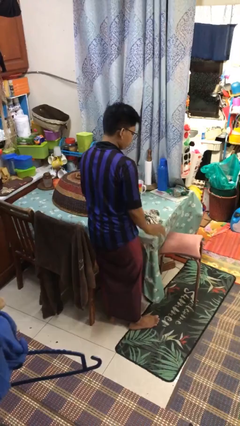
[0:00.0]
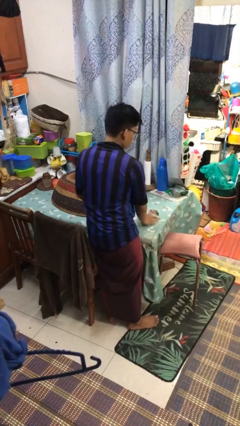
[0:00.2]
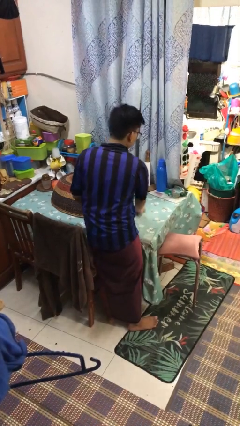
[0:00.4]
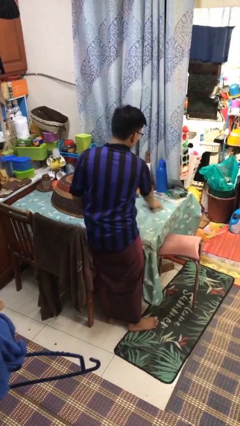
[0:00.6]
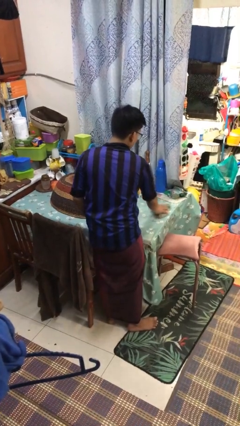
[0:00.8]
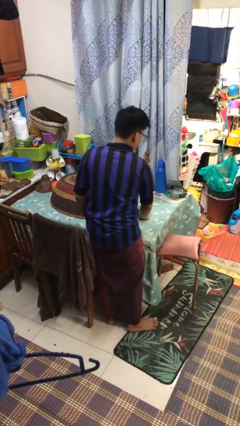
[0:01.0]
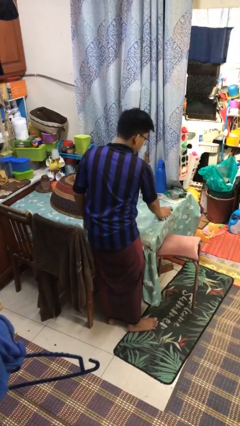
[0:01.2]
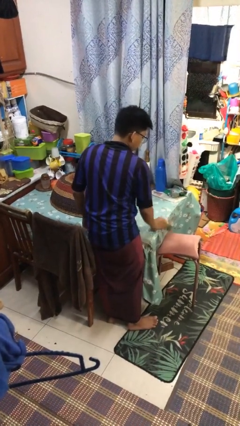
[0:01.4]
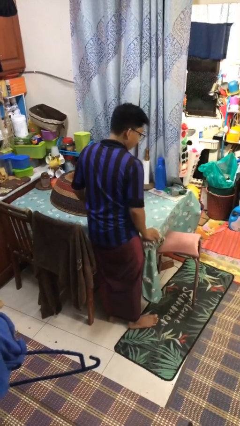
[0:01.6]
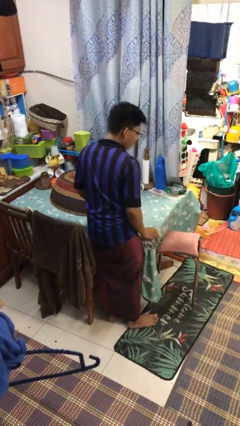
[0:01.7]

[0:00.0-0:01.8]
person cleans table with rag

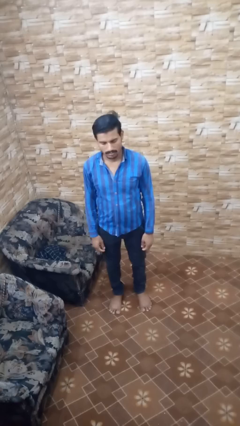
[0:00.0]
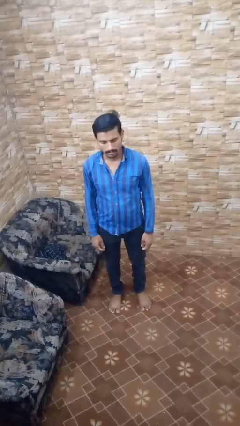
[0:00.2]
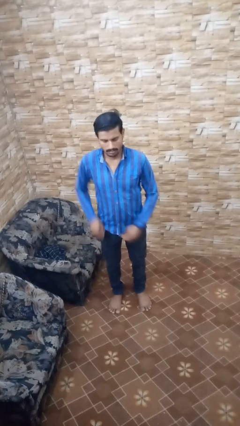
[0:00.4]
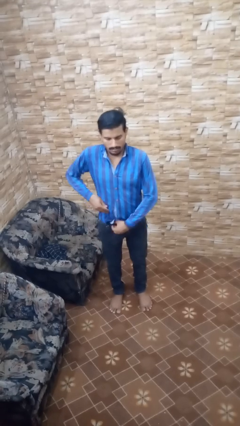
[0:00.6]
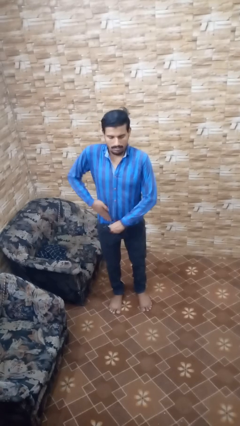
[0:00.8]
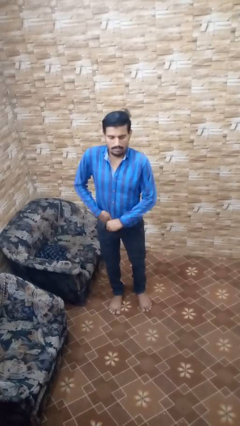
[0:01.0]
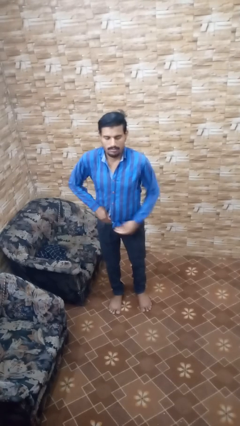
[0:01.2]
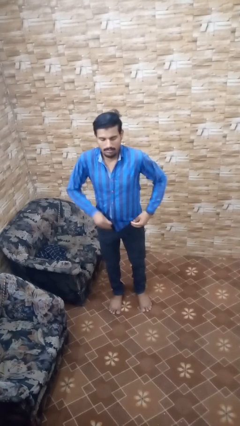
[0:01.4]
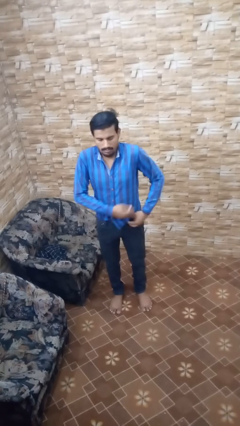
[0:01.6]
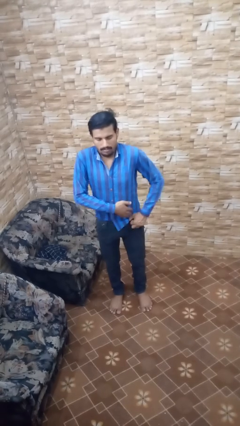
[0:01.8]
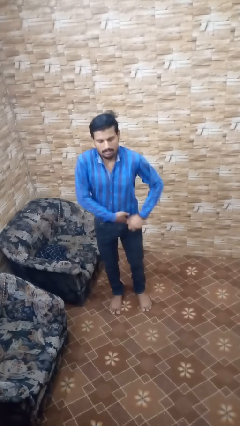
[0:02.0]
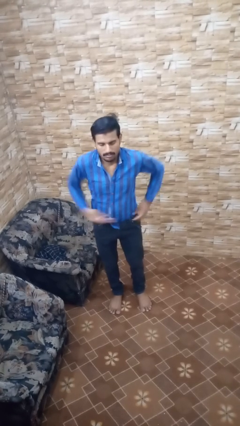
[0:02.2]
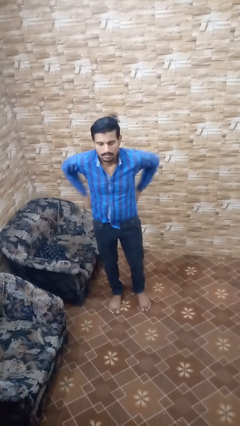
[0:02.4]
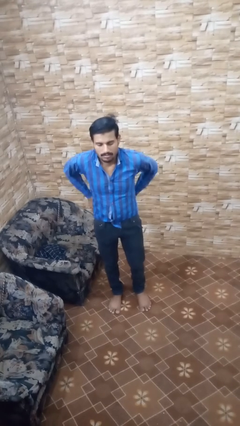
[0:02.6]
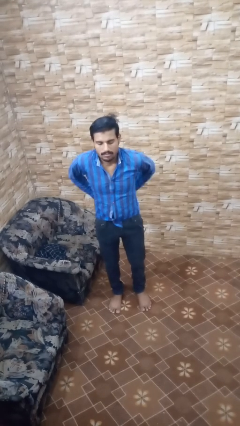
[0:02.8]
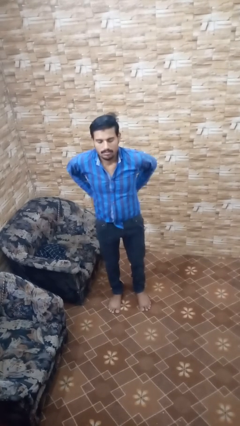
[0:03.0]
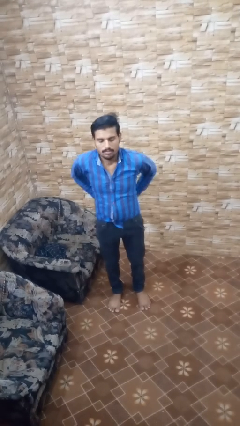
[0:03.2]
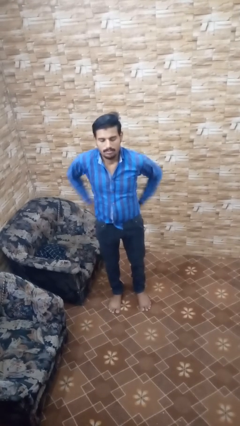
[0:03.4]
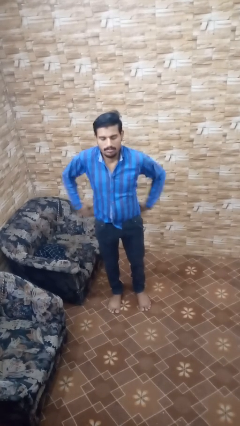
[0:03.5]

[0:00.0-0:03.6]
person tucks in shirt

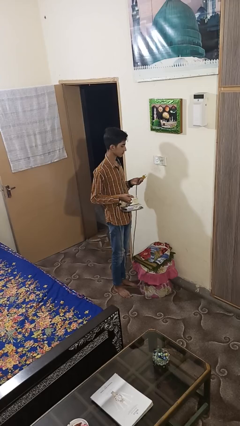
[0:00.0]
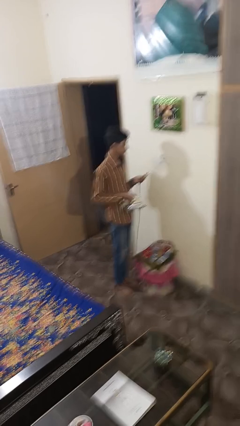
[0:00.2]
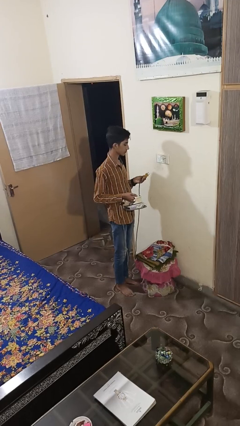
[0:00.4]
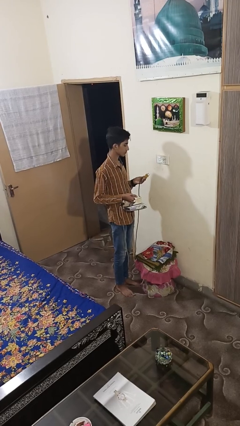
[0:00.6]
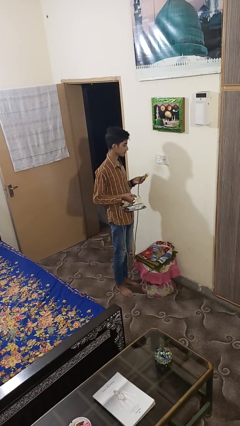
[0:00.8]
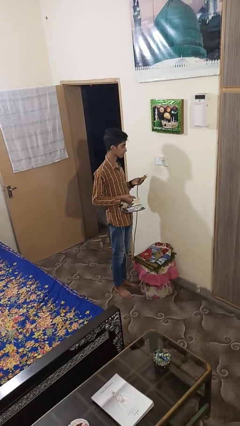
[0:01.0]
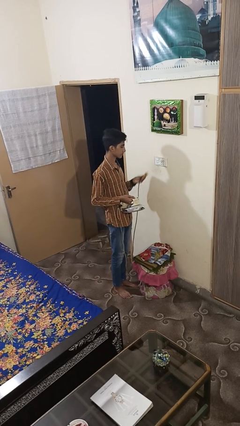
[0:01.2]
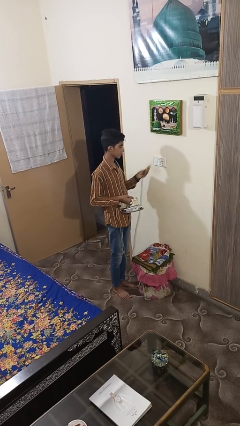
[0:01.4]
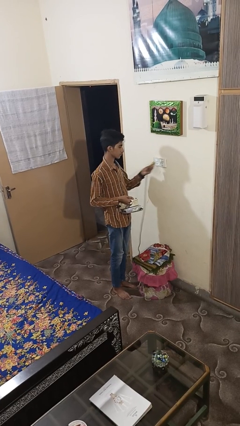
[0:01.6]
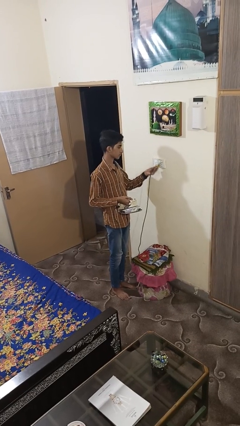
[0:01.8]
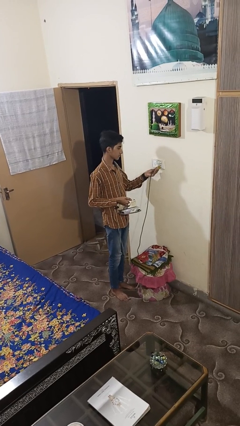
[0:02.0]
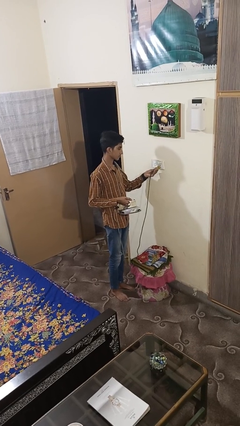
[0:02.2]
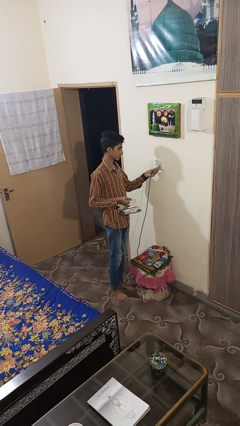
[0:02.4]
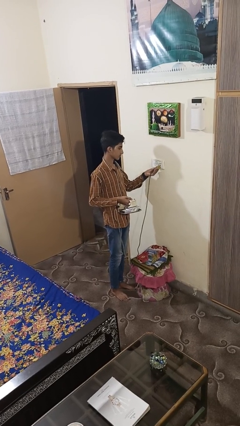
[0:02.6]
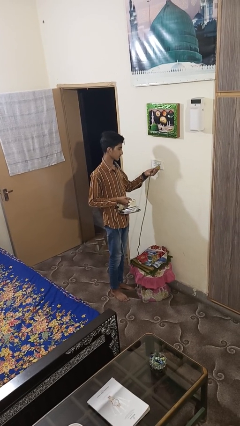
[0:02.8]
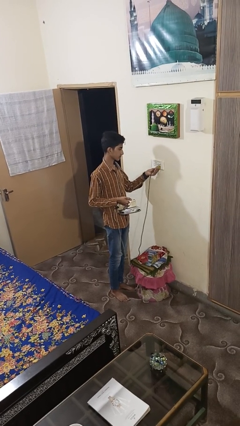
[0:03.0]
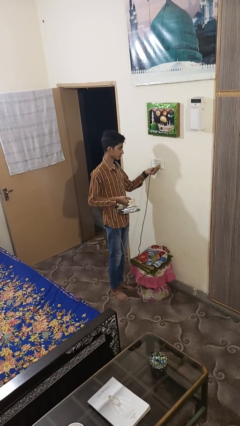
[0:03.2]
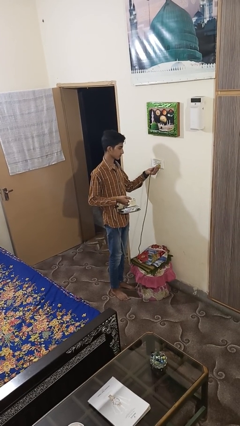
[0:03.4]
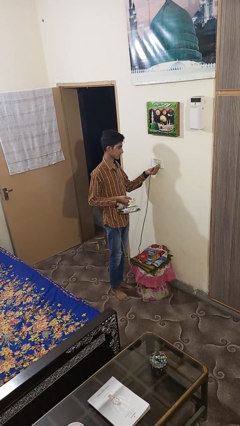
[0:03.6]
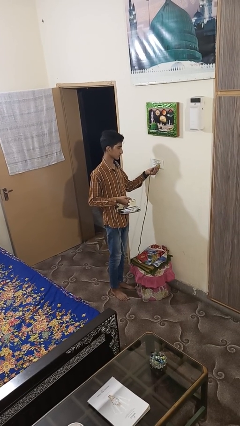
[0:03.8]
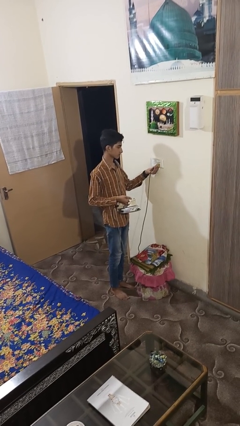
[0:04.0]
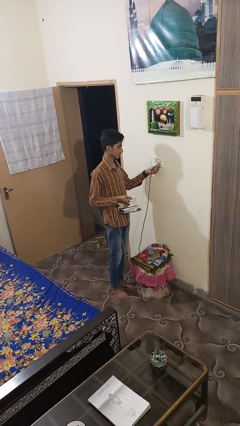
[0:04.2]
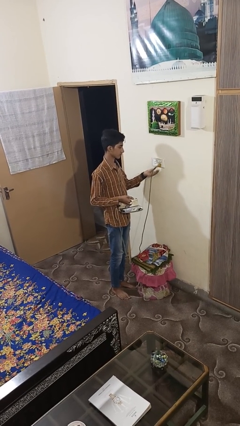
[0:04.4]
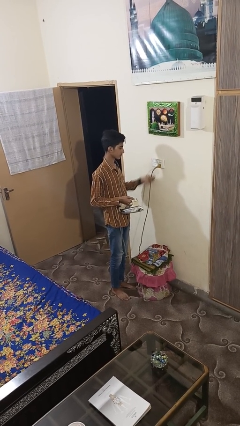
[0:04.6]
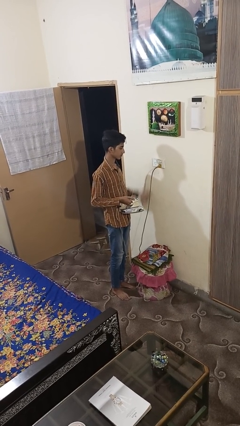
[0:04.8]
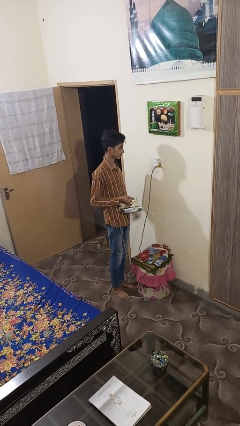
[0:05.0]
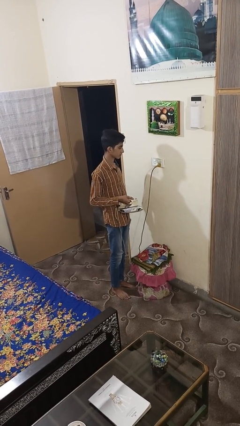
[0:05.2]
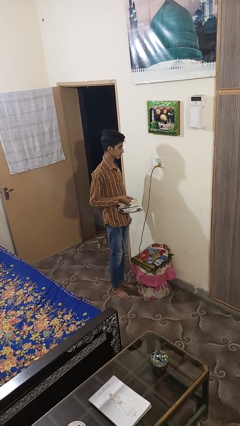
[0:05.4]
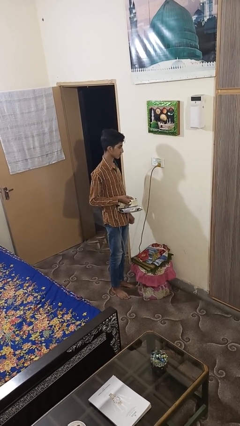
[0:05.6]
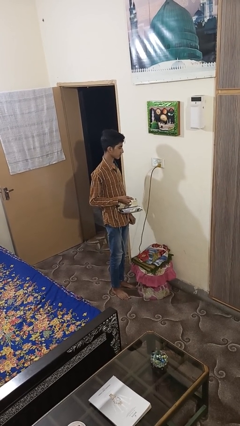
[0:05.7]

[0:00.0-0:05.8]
person plugs into electrical socket

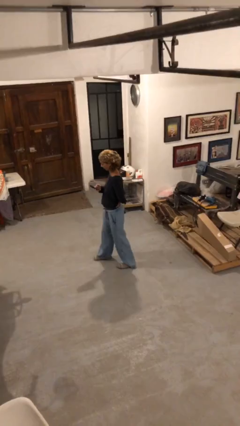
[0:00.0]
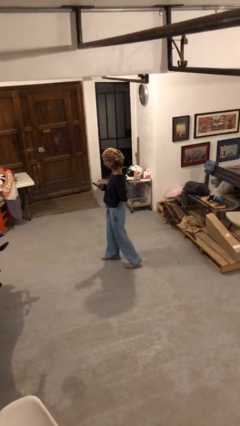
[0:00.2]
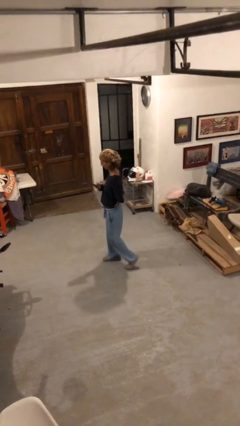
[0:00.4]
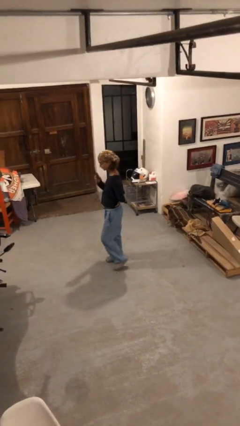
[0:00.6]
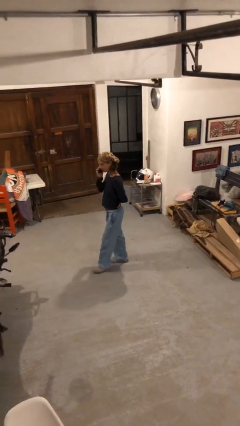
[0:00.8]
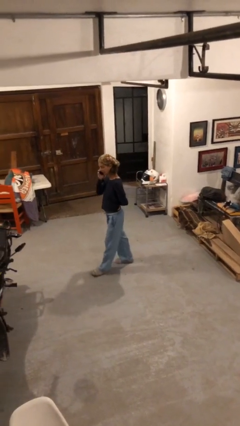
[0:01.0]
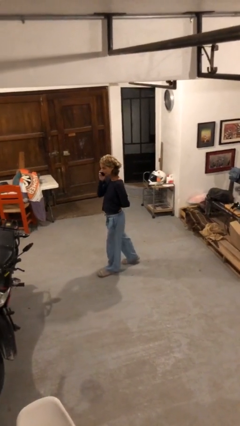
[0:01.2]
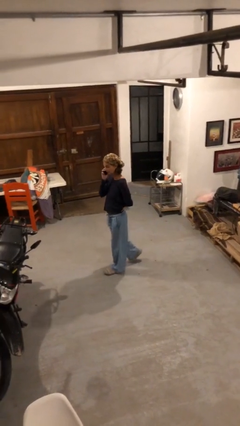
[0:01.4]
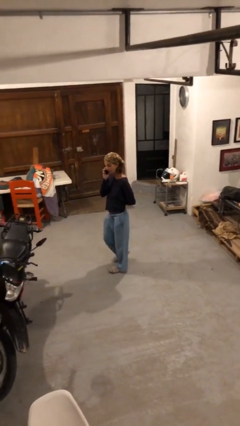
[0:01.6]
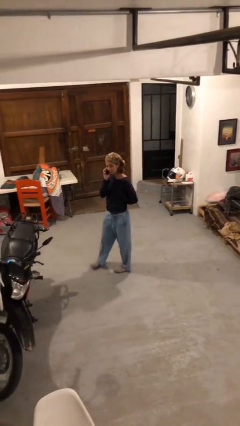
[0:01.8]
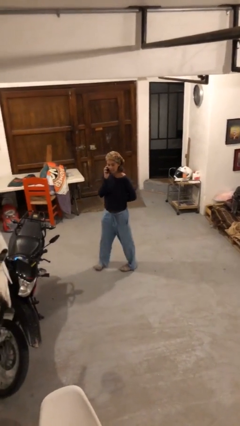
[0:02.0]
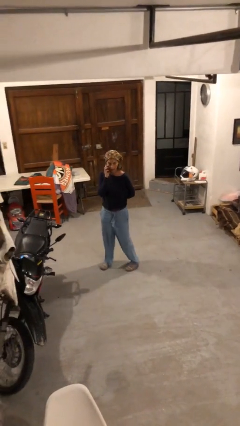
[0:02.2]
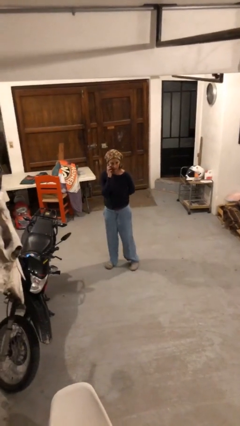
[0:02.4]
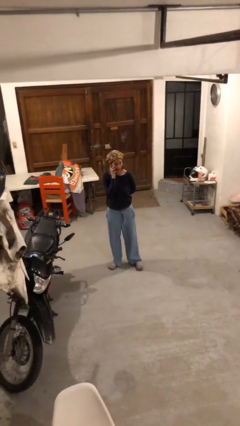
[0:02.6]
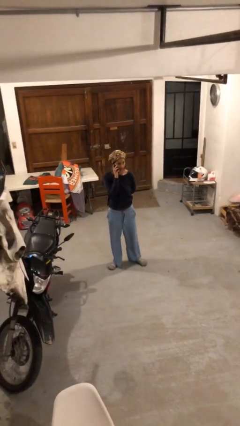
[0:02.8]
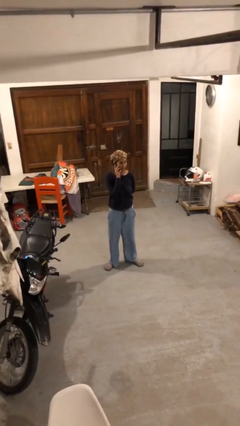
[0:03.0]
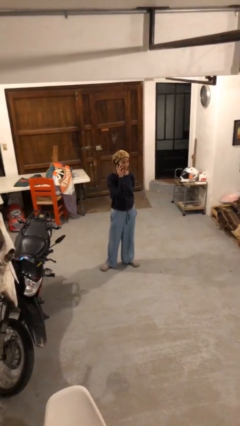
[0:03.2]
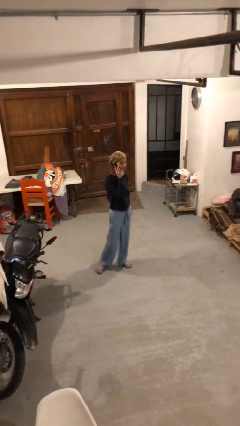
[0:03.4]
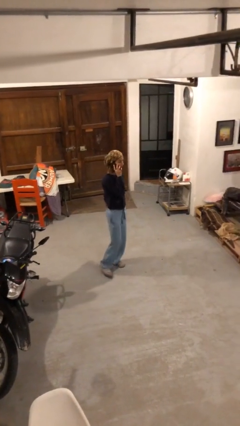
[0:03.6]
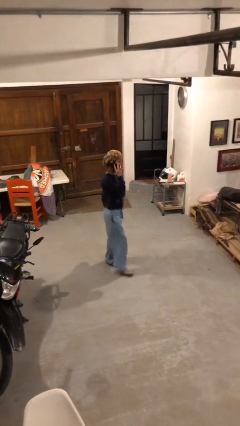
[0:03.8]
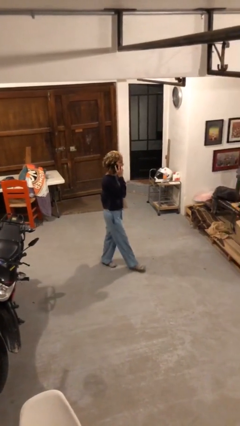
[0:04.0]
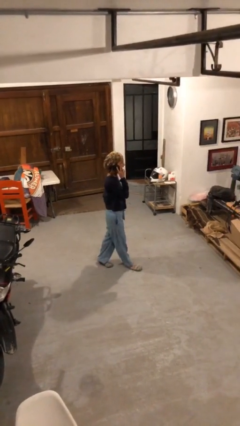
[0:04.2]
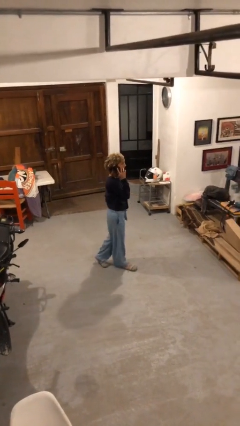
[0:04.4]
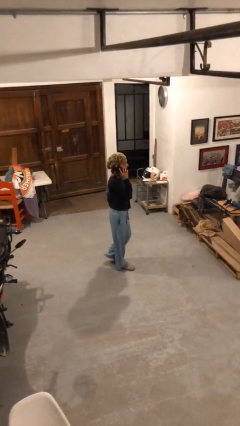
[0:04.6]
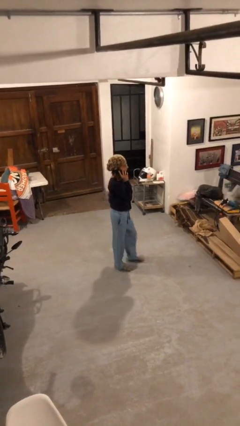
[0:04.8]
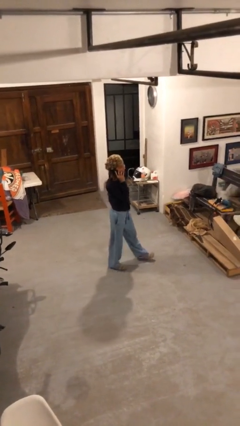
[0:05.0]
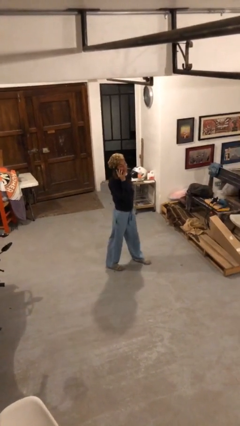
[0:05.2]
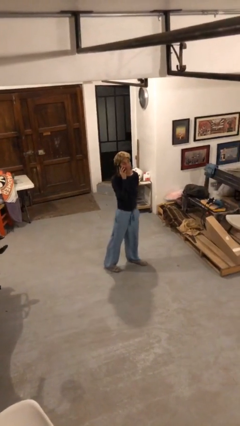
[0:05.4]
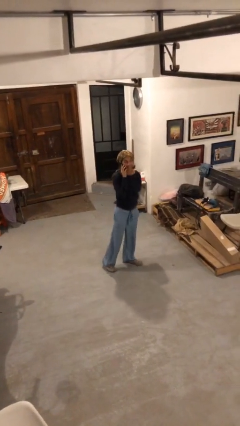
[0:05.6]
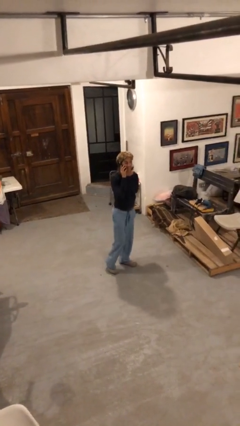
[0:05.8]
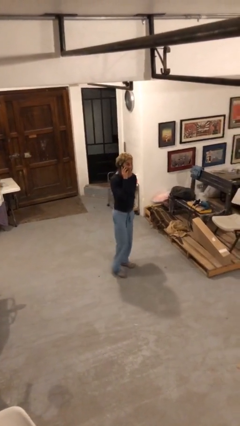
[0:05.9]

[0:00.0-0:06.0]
person talks on phone

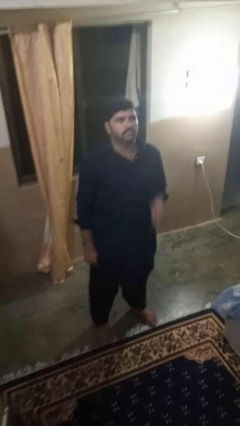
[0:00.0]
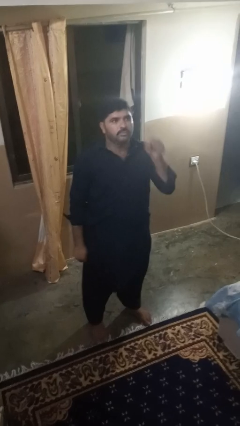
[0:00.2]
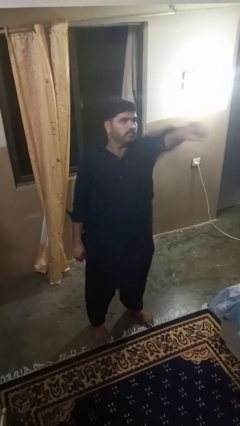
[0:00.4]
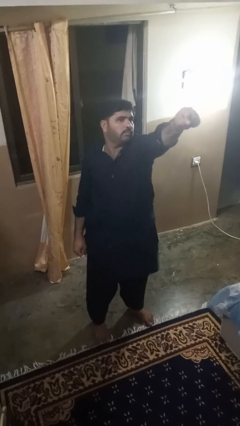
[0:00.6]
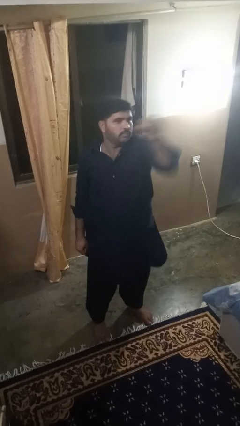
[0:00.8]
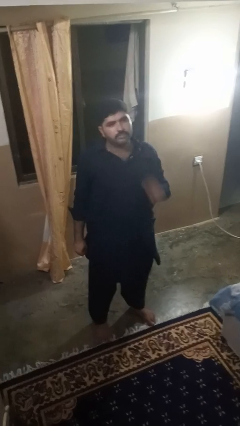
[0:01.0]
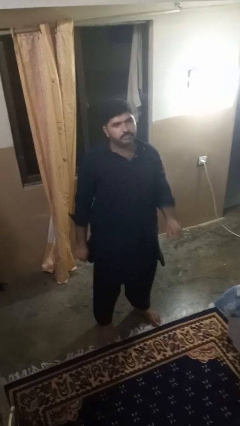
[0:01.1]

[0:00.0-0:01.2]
person punches
